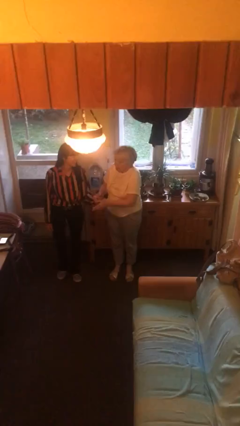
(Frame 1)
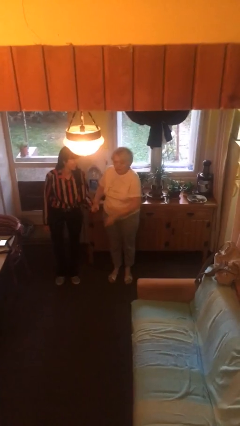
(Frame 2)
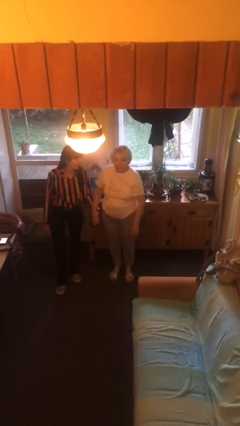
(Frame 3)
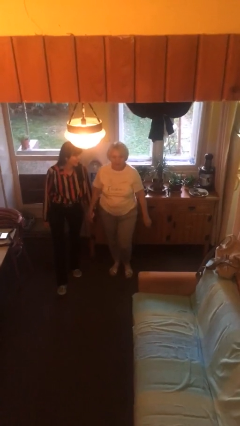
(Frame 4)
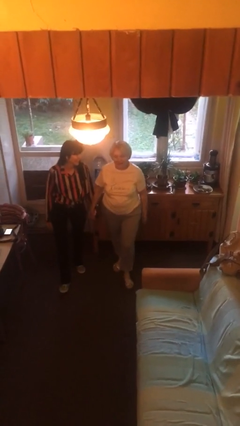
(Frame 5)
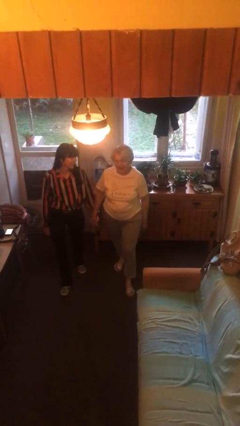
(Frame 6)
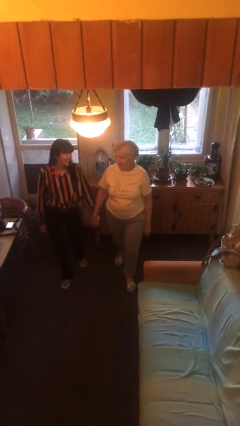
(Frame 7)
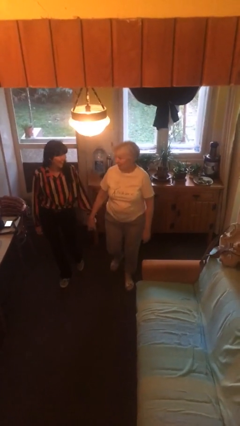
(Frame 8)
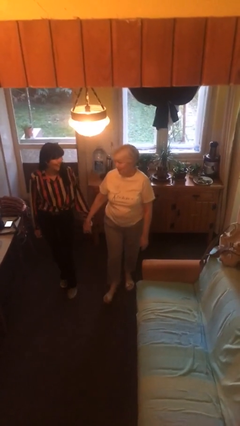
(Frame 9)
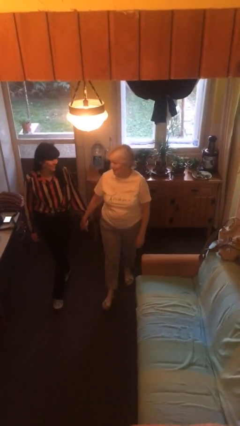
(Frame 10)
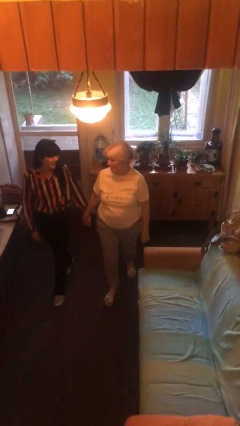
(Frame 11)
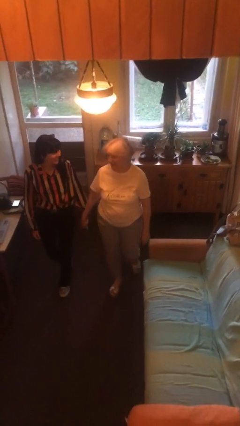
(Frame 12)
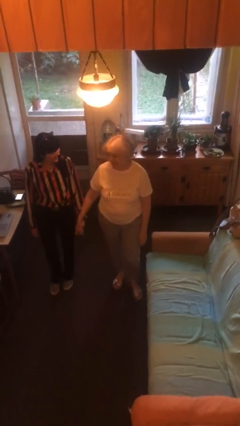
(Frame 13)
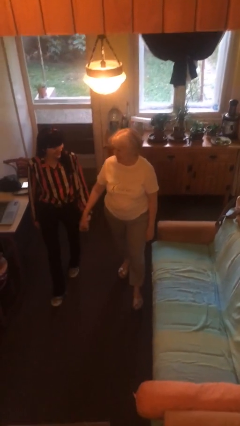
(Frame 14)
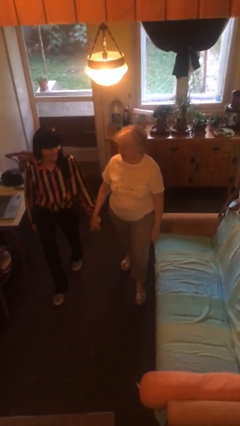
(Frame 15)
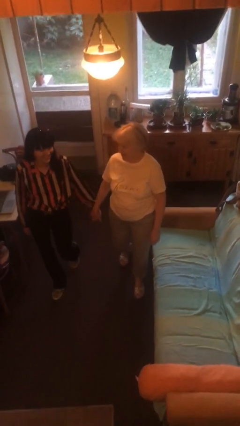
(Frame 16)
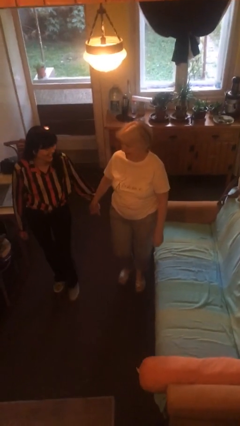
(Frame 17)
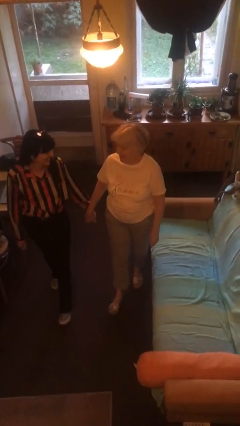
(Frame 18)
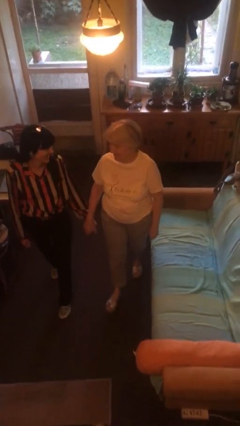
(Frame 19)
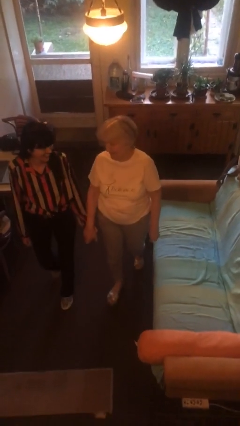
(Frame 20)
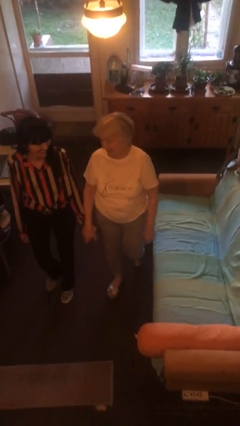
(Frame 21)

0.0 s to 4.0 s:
person holds hand

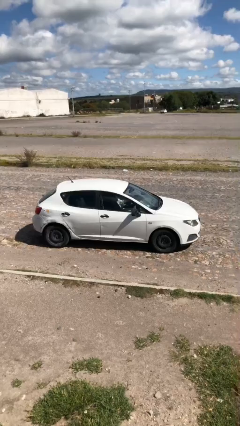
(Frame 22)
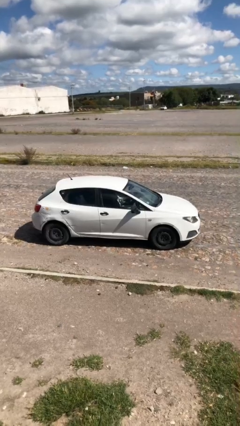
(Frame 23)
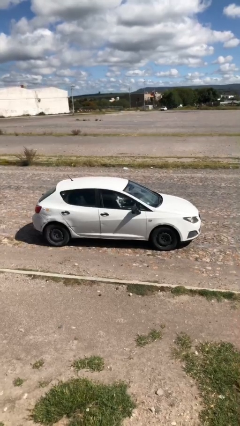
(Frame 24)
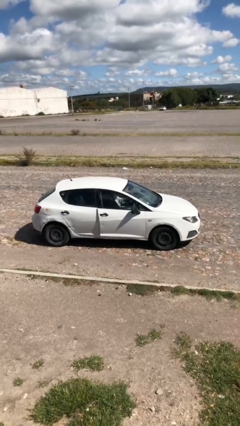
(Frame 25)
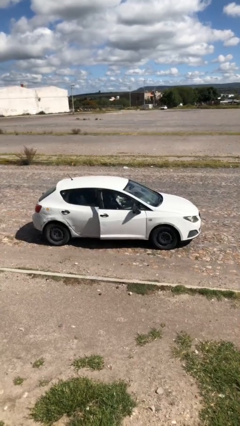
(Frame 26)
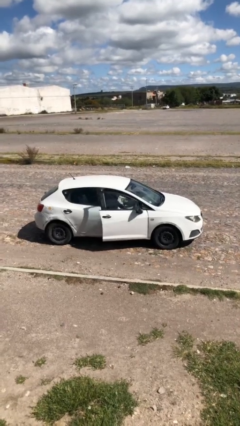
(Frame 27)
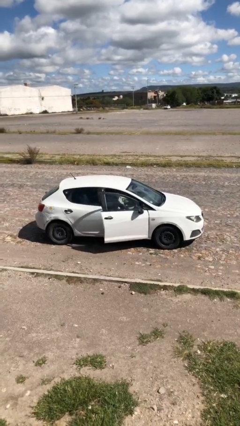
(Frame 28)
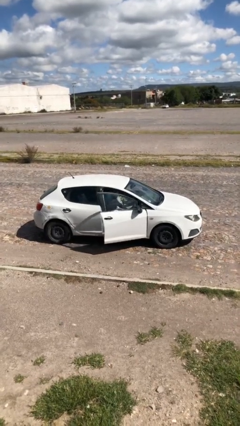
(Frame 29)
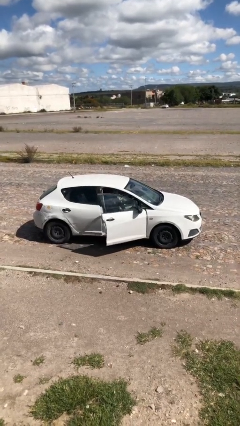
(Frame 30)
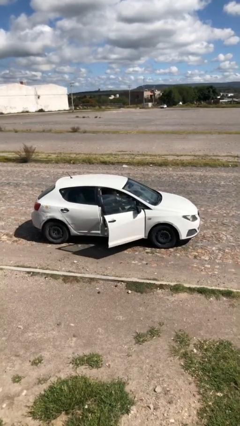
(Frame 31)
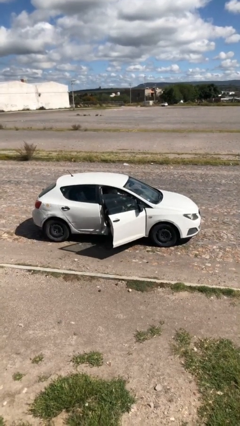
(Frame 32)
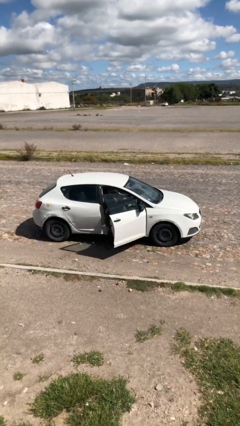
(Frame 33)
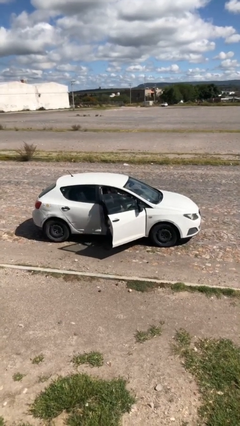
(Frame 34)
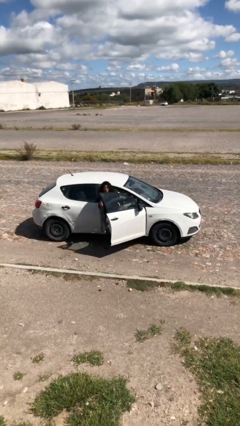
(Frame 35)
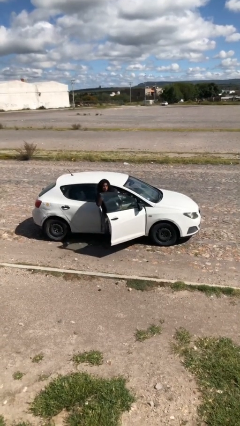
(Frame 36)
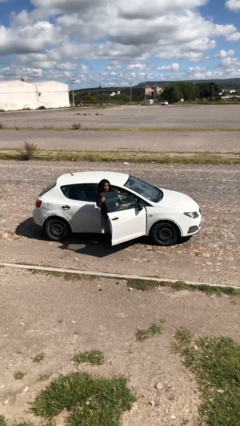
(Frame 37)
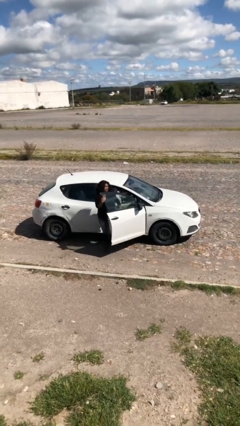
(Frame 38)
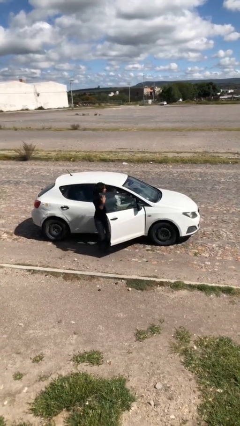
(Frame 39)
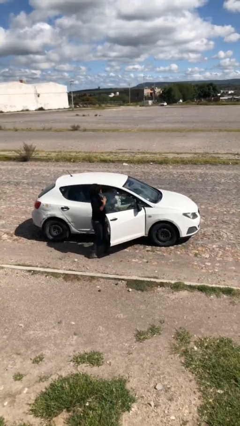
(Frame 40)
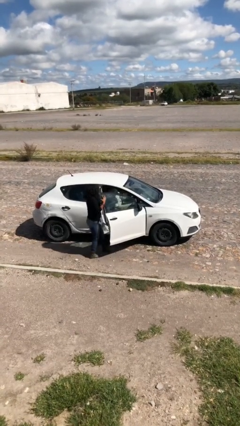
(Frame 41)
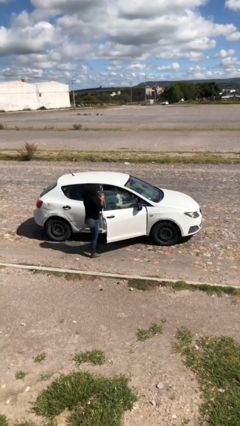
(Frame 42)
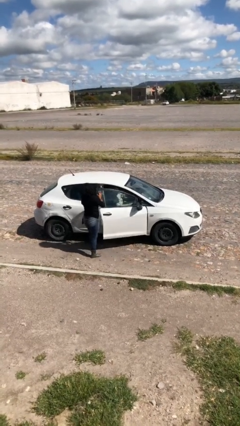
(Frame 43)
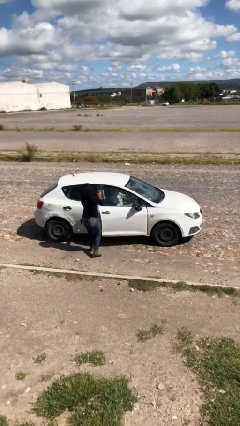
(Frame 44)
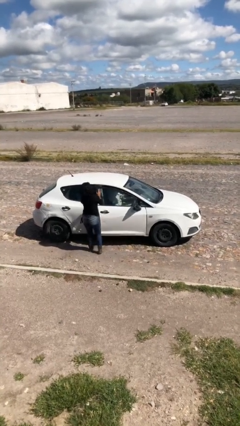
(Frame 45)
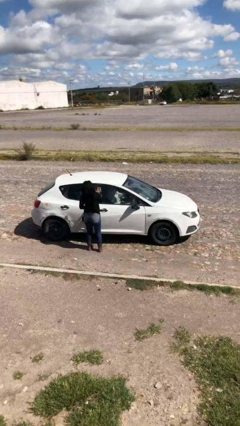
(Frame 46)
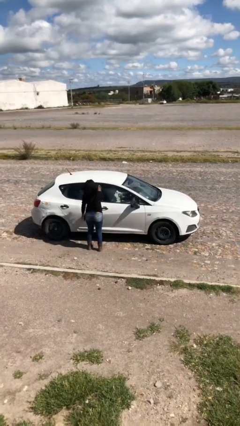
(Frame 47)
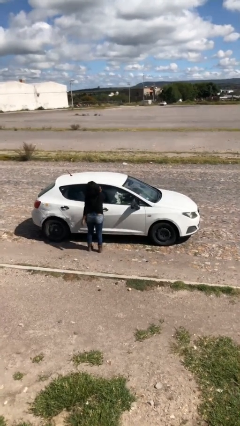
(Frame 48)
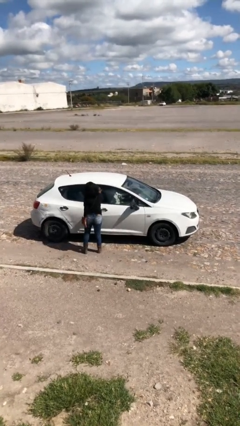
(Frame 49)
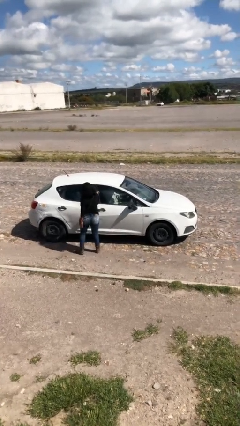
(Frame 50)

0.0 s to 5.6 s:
car drops off person

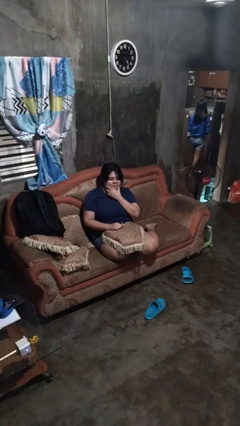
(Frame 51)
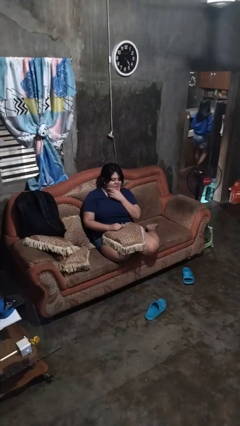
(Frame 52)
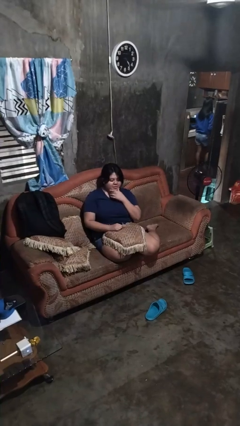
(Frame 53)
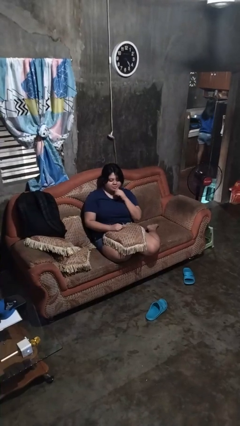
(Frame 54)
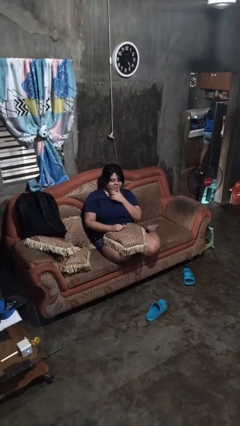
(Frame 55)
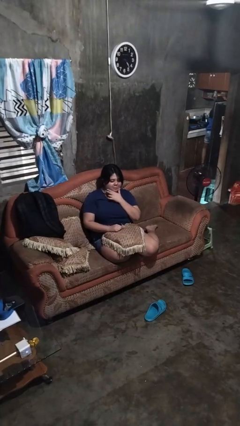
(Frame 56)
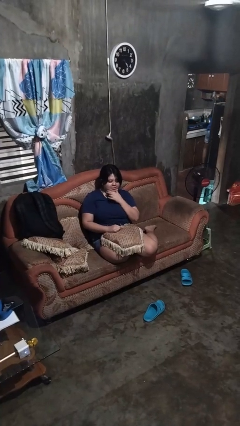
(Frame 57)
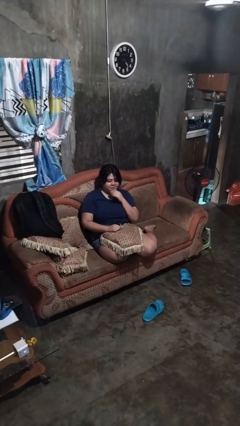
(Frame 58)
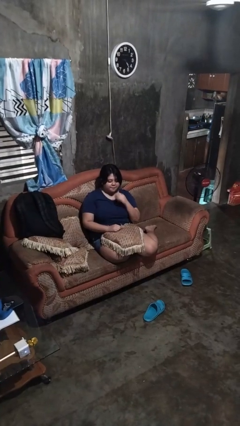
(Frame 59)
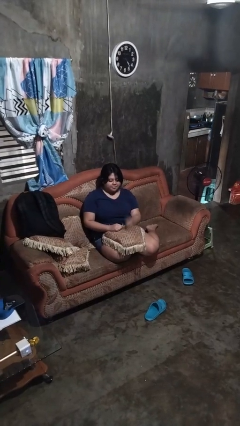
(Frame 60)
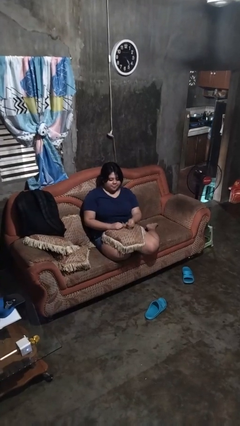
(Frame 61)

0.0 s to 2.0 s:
person strokes chin

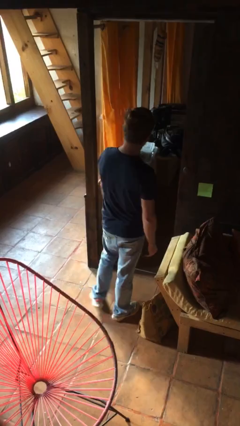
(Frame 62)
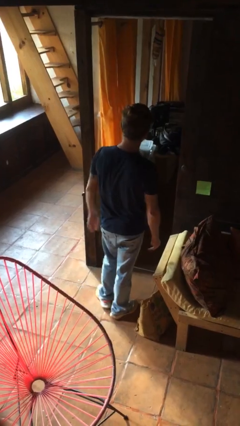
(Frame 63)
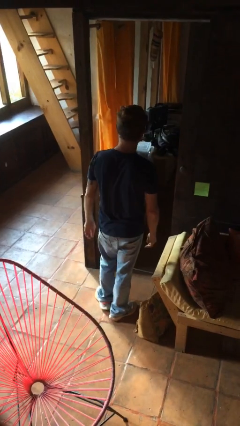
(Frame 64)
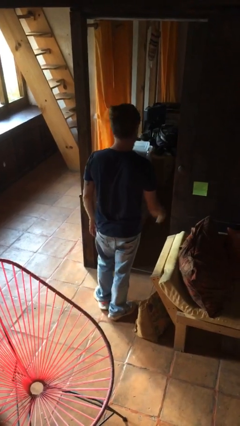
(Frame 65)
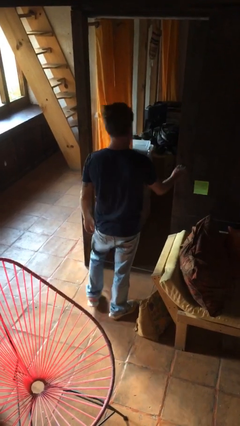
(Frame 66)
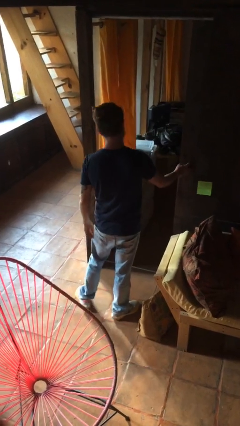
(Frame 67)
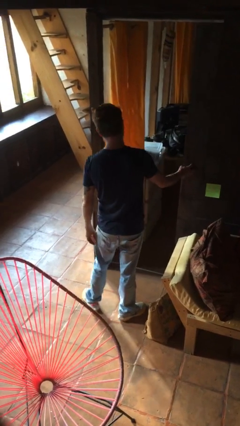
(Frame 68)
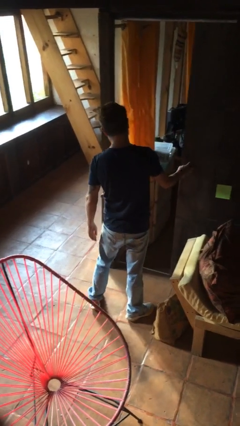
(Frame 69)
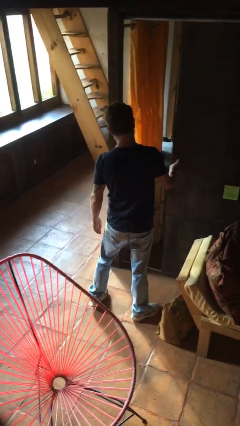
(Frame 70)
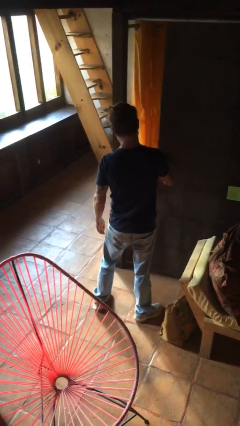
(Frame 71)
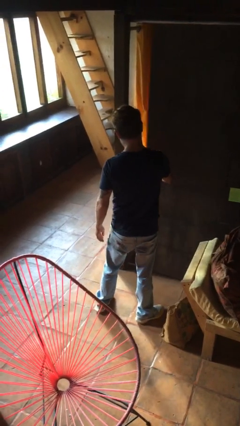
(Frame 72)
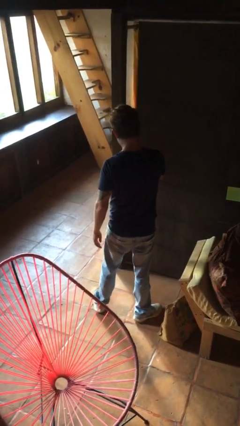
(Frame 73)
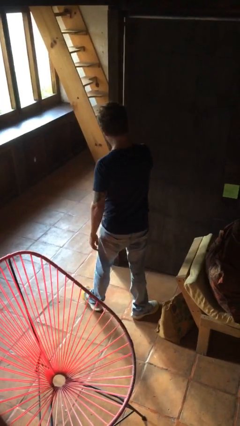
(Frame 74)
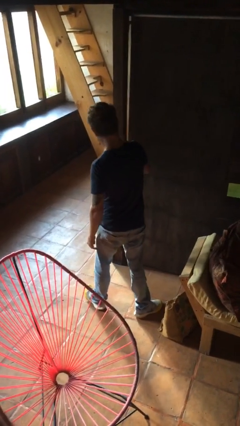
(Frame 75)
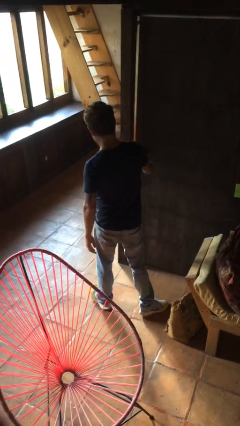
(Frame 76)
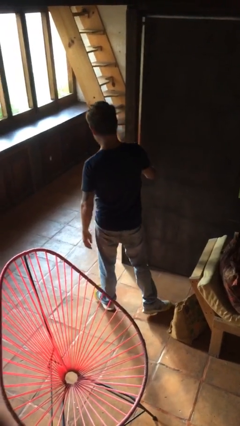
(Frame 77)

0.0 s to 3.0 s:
person closes sliding door

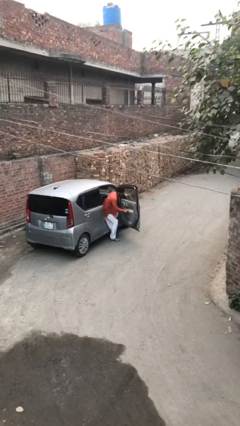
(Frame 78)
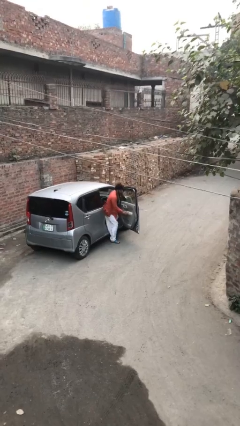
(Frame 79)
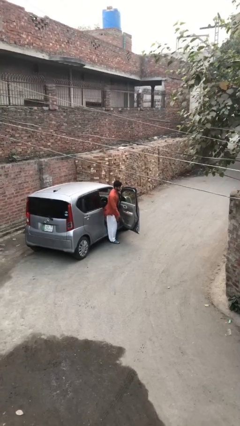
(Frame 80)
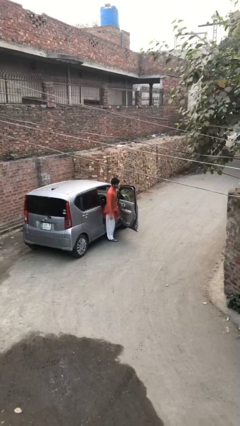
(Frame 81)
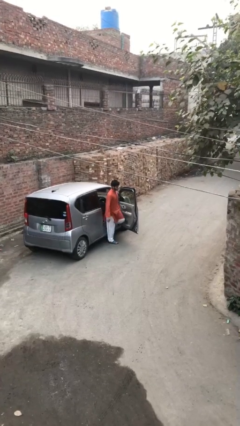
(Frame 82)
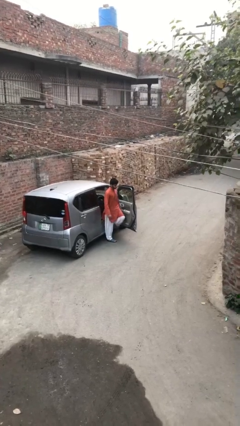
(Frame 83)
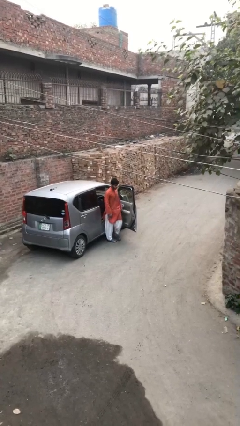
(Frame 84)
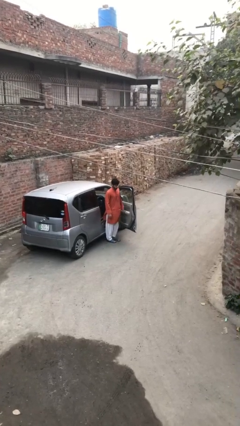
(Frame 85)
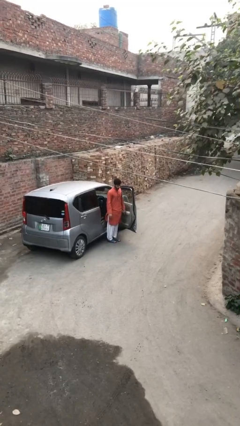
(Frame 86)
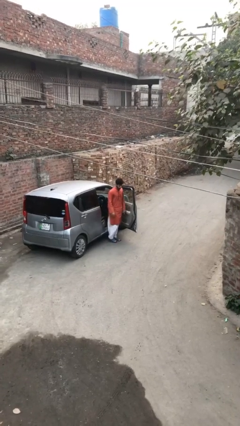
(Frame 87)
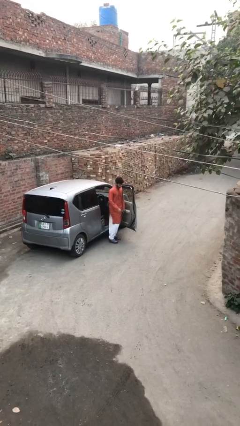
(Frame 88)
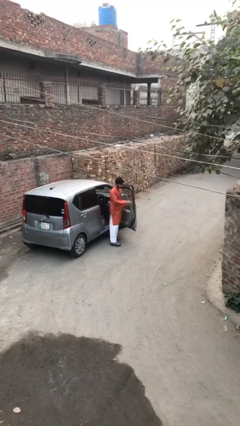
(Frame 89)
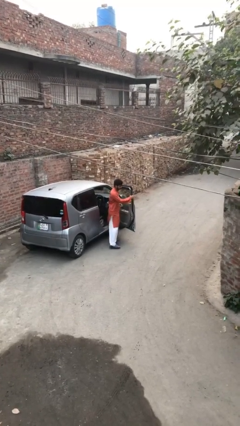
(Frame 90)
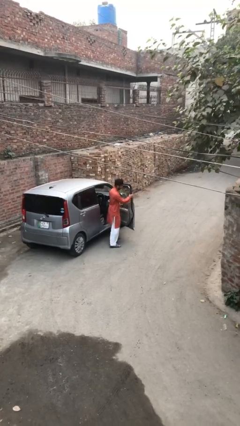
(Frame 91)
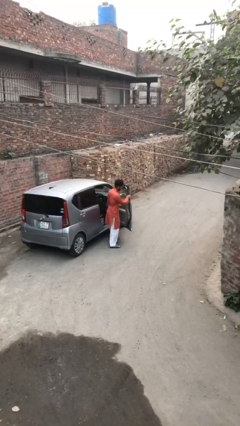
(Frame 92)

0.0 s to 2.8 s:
person exits car
